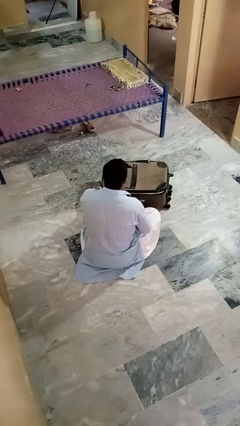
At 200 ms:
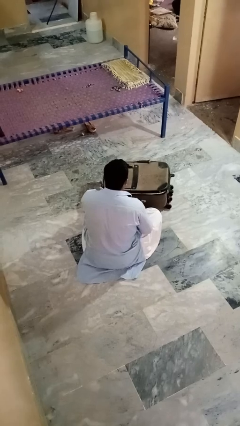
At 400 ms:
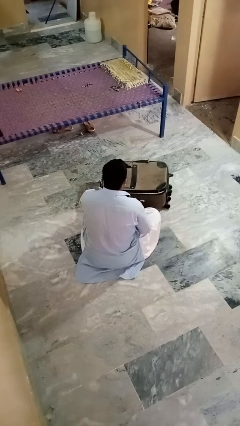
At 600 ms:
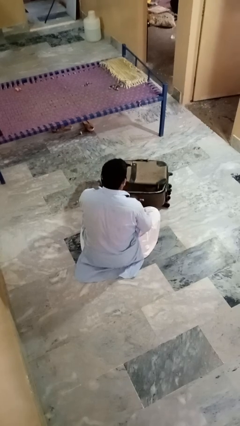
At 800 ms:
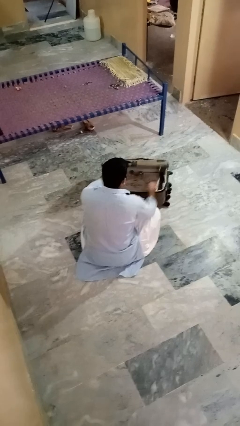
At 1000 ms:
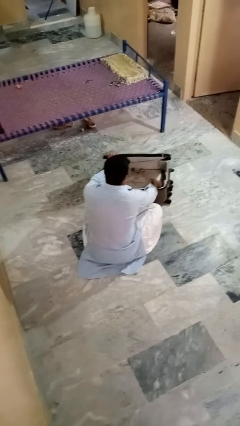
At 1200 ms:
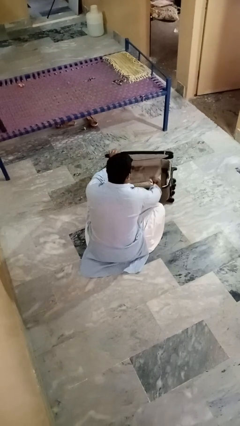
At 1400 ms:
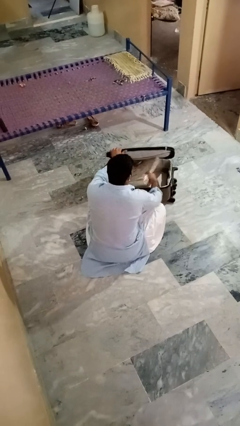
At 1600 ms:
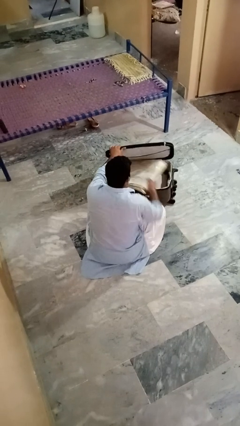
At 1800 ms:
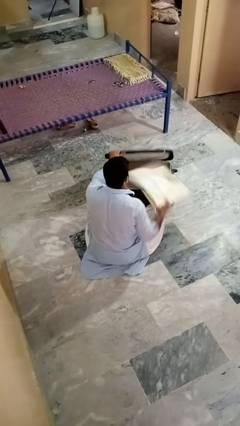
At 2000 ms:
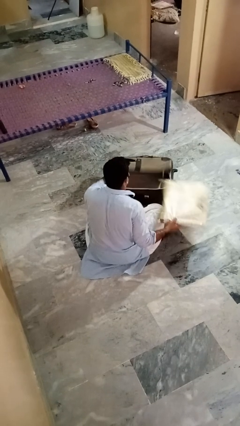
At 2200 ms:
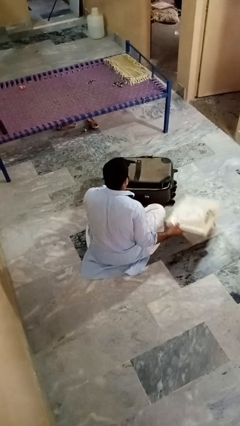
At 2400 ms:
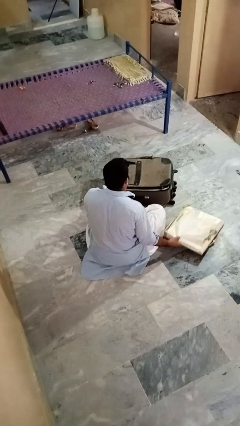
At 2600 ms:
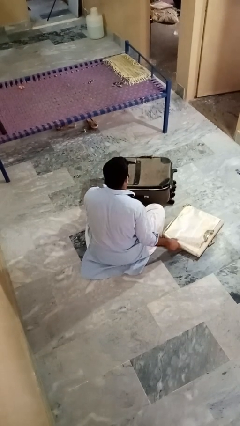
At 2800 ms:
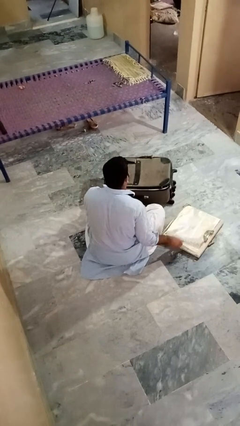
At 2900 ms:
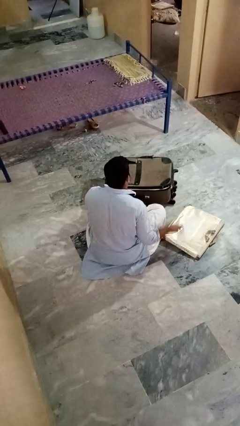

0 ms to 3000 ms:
person takes object from bag

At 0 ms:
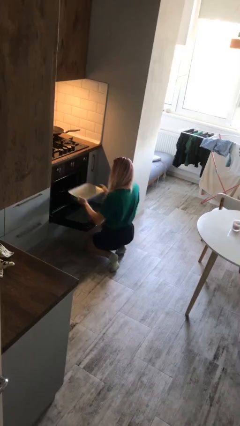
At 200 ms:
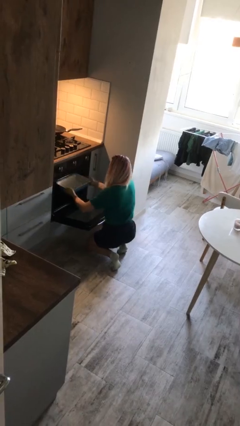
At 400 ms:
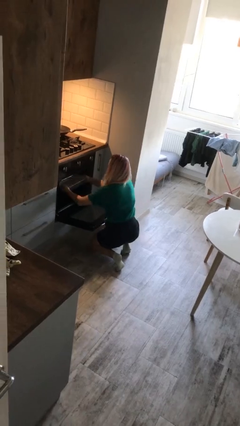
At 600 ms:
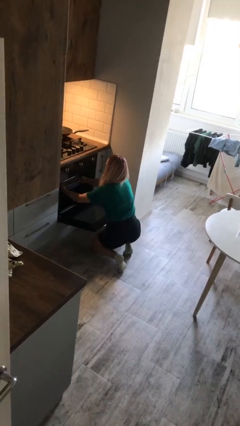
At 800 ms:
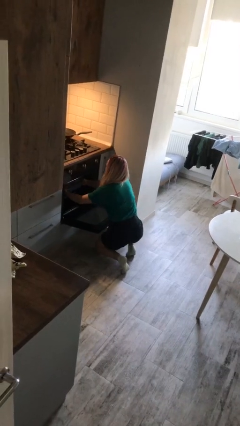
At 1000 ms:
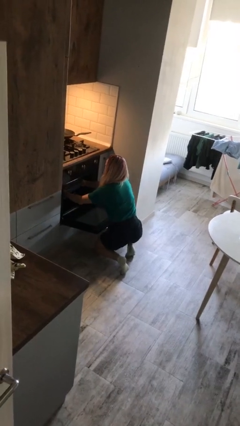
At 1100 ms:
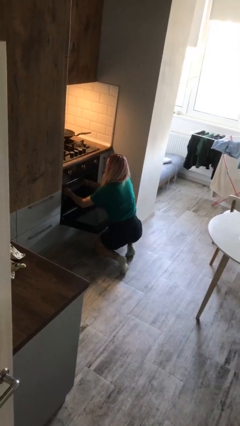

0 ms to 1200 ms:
person puts object into oven

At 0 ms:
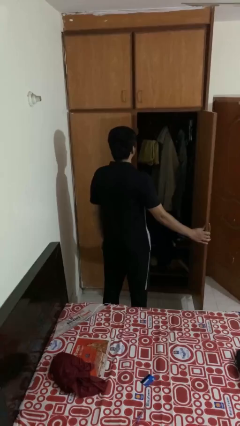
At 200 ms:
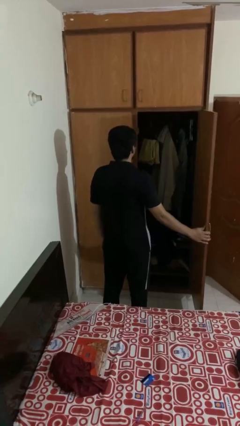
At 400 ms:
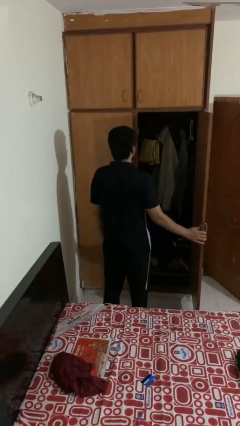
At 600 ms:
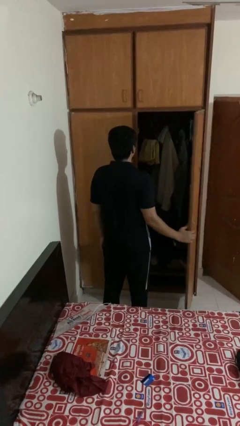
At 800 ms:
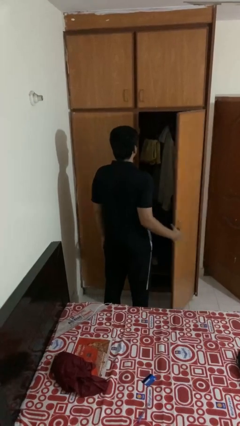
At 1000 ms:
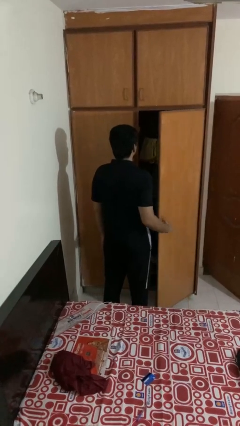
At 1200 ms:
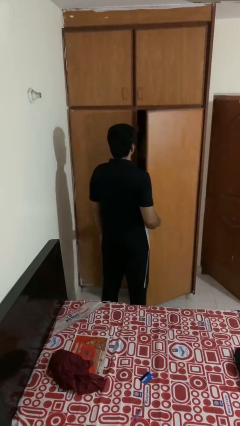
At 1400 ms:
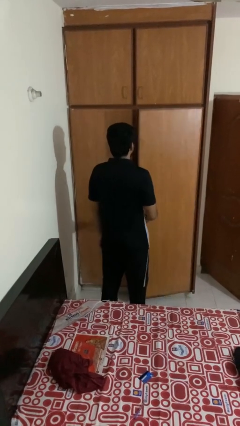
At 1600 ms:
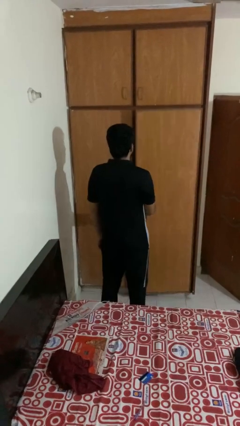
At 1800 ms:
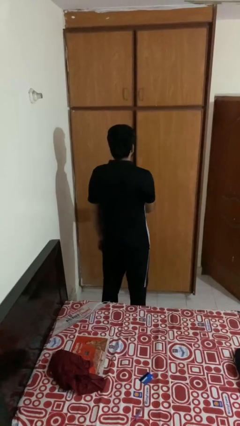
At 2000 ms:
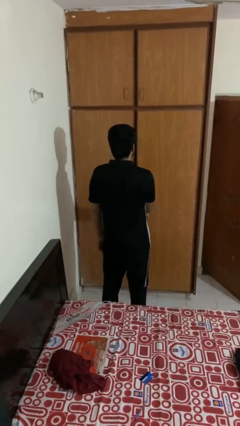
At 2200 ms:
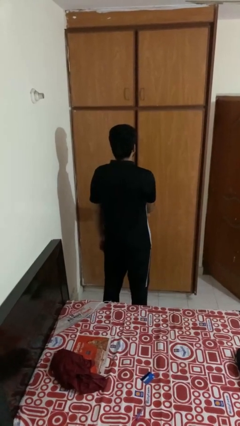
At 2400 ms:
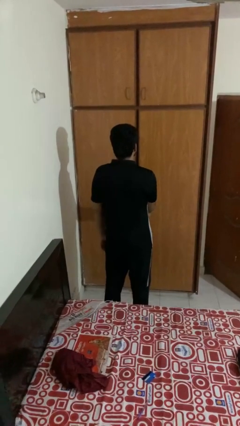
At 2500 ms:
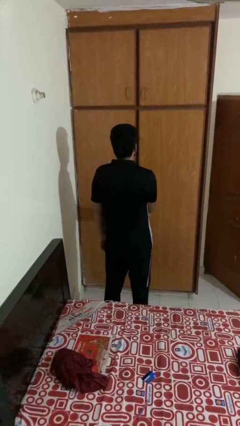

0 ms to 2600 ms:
person closes closet door

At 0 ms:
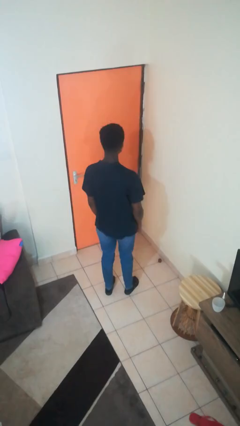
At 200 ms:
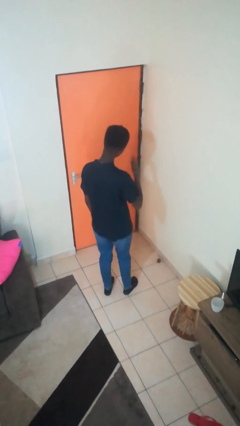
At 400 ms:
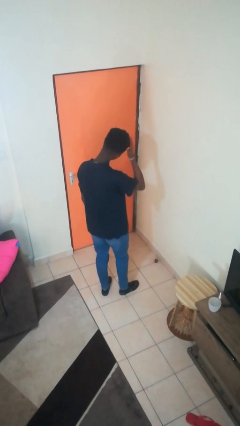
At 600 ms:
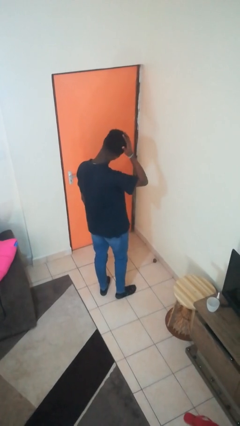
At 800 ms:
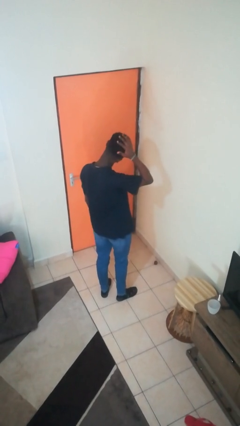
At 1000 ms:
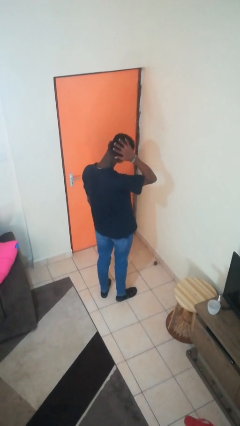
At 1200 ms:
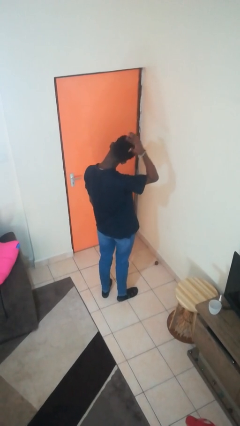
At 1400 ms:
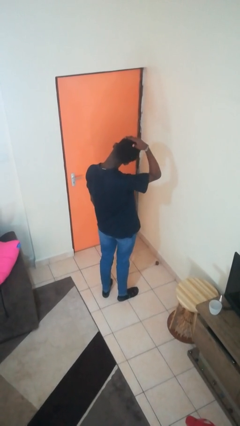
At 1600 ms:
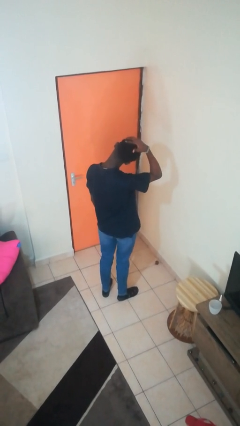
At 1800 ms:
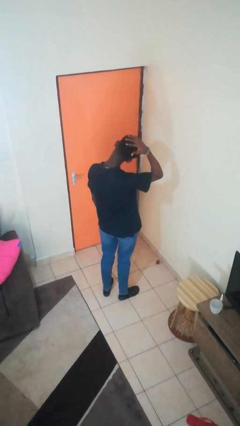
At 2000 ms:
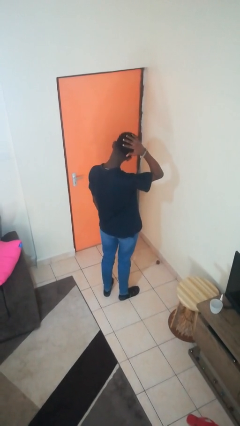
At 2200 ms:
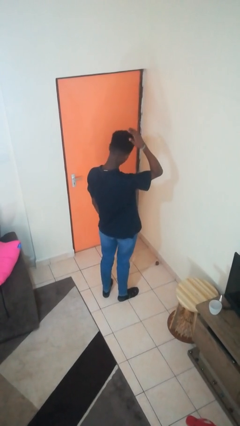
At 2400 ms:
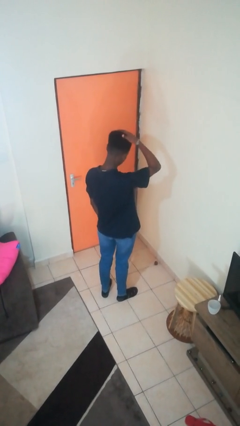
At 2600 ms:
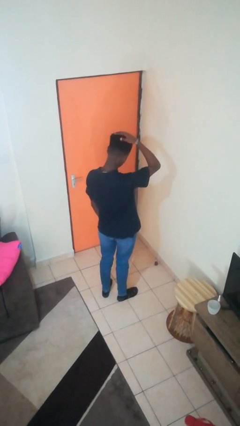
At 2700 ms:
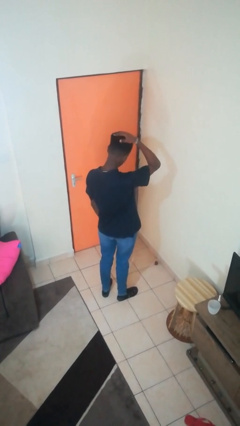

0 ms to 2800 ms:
person strokes hair

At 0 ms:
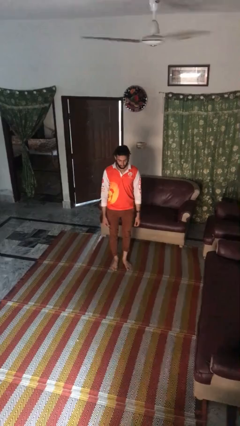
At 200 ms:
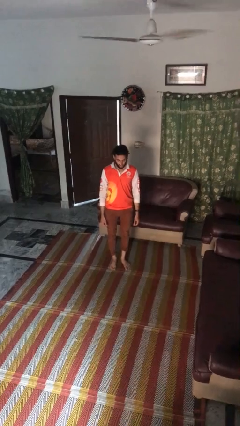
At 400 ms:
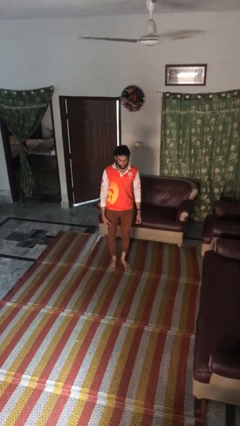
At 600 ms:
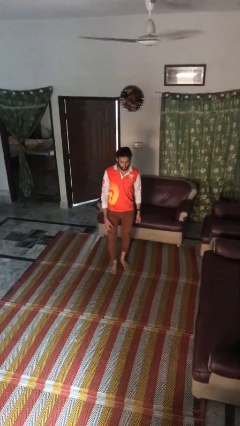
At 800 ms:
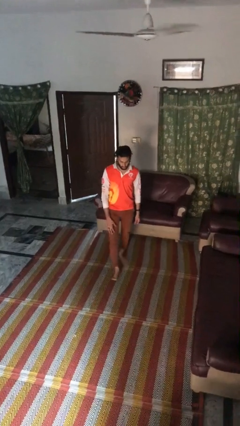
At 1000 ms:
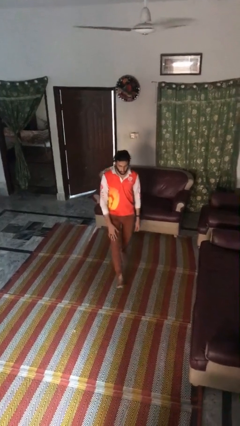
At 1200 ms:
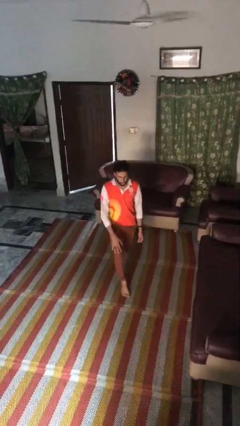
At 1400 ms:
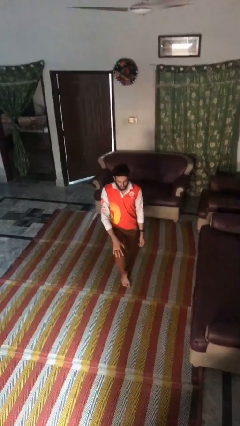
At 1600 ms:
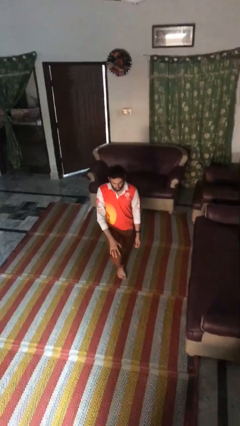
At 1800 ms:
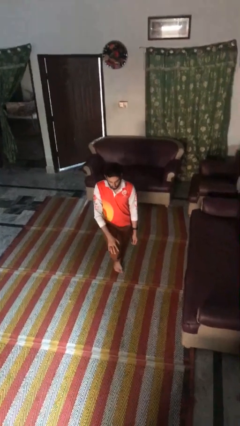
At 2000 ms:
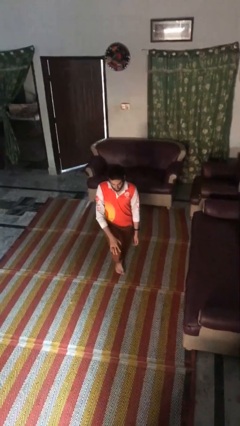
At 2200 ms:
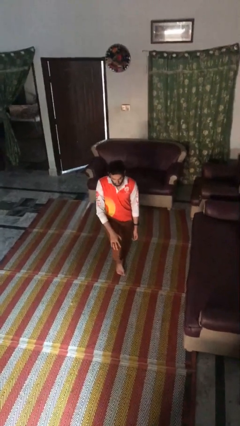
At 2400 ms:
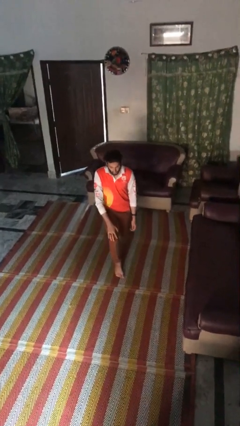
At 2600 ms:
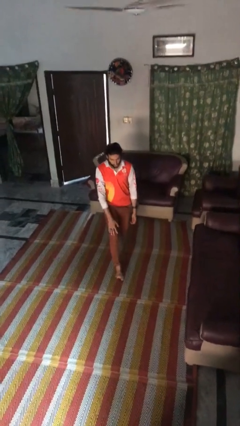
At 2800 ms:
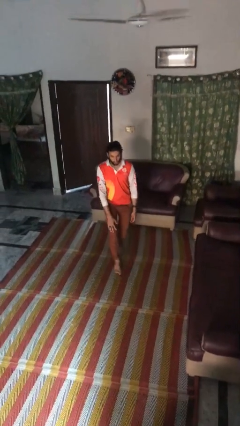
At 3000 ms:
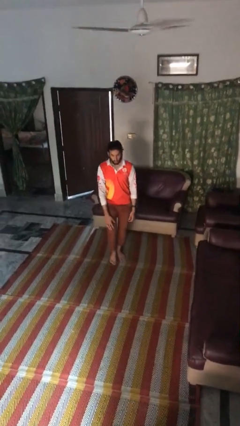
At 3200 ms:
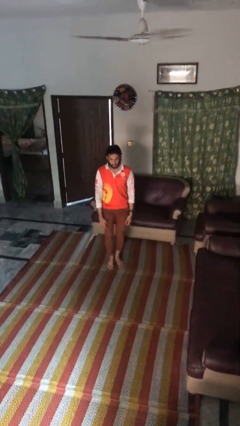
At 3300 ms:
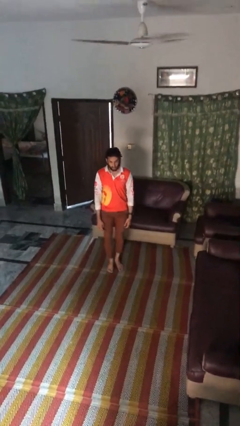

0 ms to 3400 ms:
person exercises with lunges

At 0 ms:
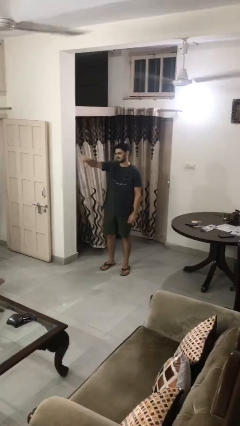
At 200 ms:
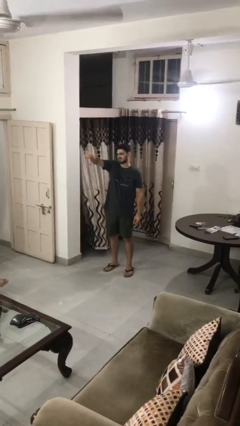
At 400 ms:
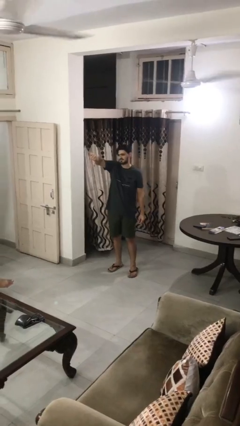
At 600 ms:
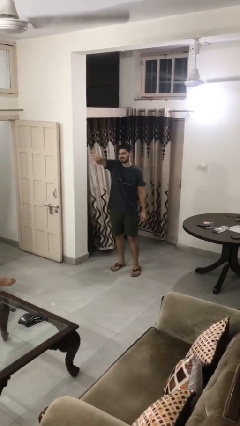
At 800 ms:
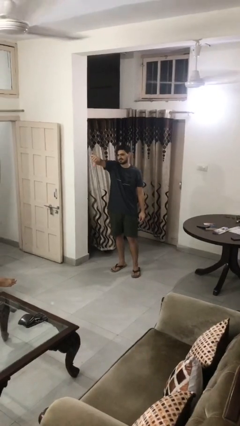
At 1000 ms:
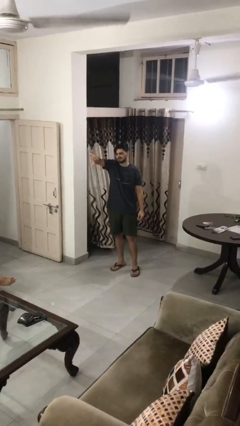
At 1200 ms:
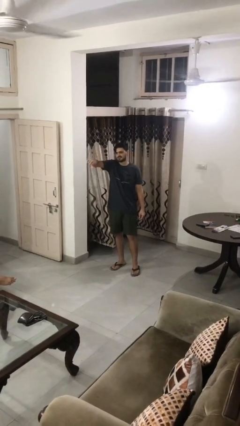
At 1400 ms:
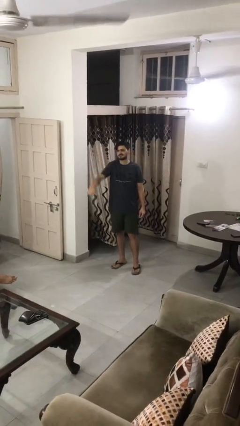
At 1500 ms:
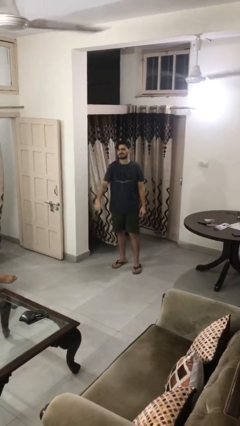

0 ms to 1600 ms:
person gestures thumbs down

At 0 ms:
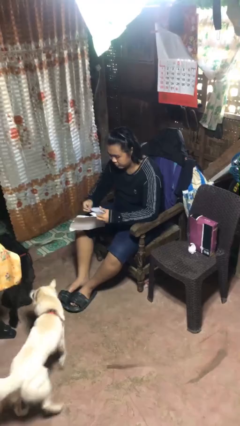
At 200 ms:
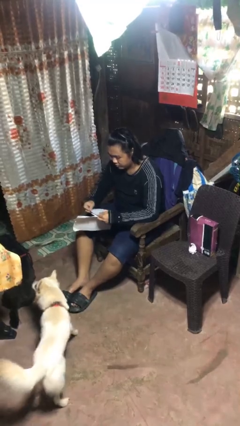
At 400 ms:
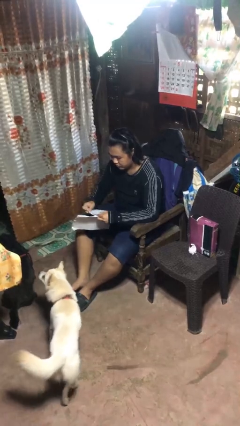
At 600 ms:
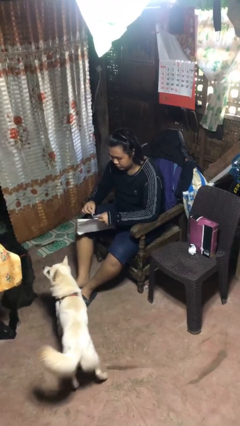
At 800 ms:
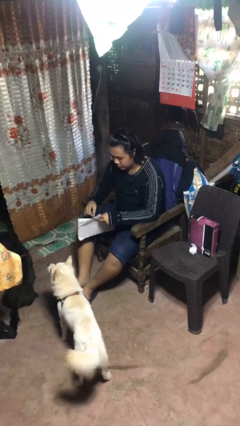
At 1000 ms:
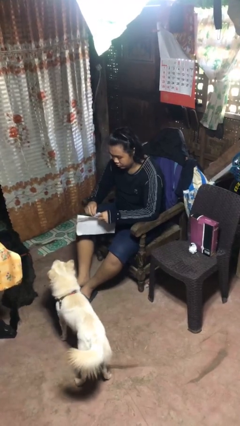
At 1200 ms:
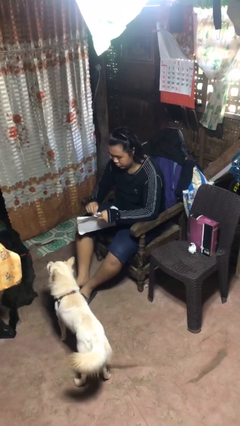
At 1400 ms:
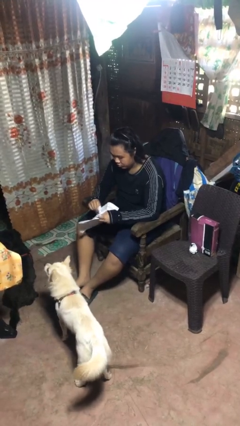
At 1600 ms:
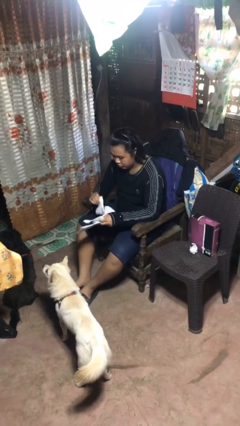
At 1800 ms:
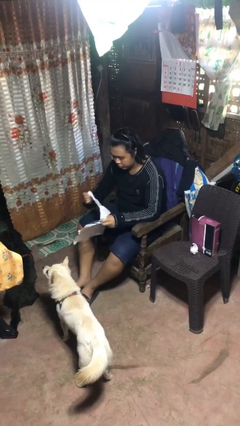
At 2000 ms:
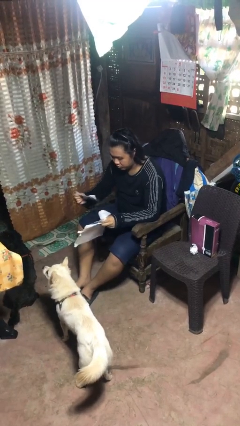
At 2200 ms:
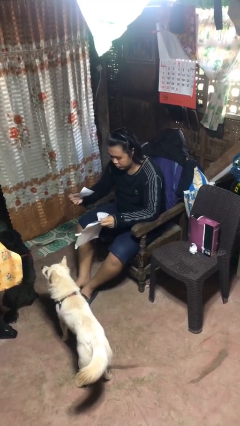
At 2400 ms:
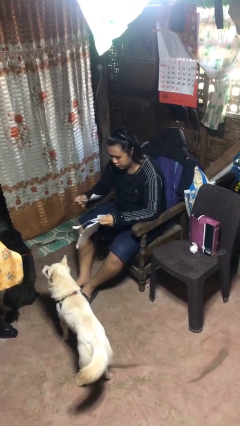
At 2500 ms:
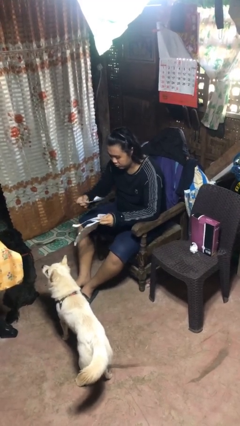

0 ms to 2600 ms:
person tears paper
